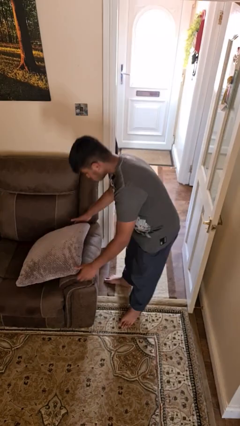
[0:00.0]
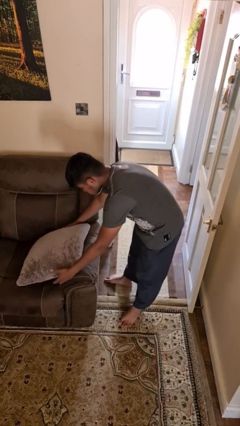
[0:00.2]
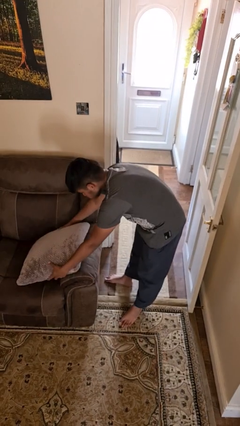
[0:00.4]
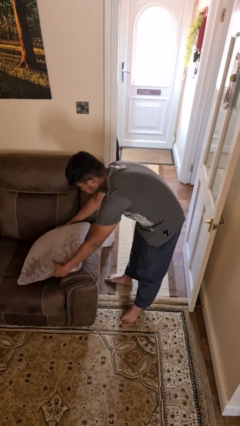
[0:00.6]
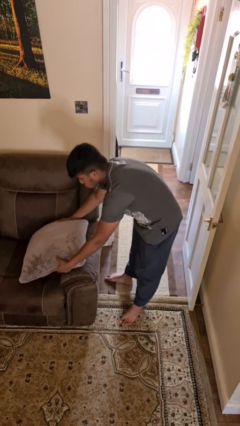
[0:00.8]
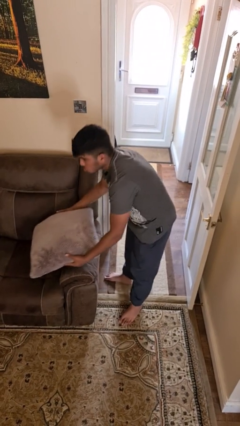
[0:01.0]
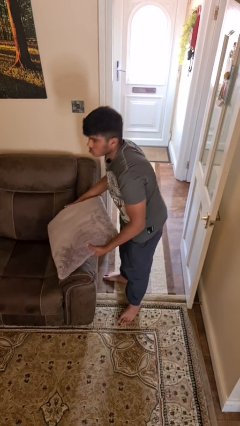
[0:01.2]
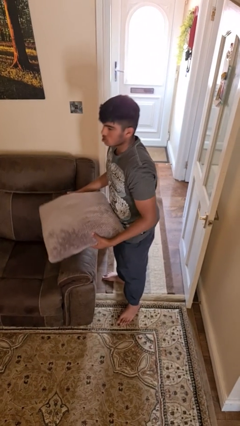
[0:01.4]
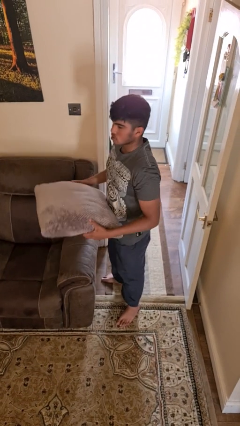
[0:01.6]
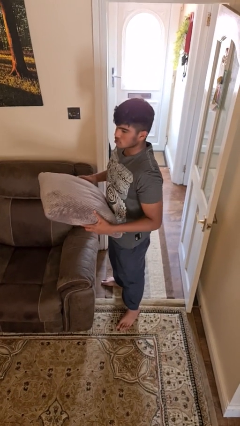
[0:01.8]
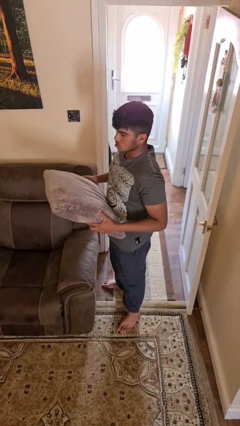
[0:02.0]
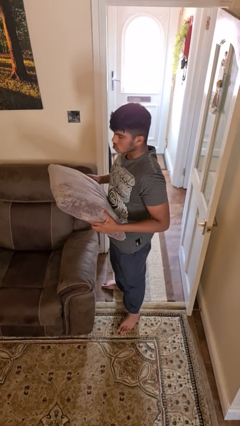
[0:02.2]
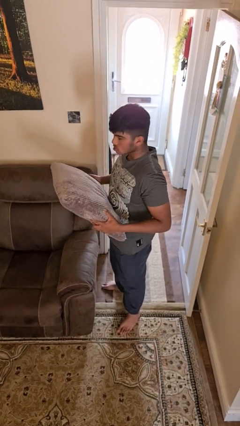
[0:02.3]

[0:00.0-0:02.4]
person picks up object from couch

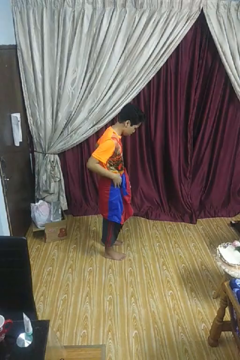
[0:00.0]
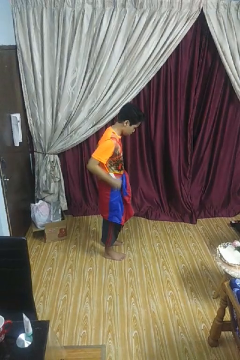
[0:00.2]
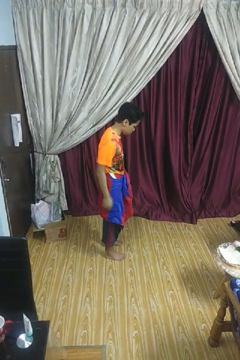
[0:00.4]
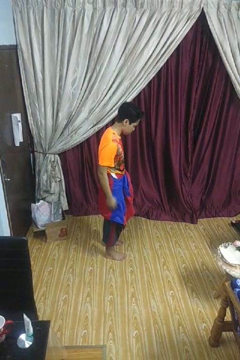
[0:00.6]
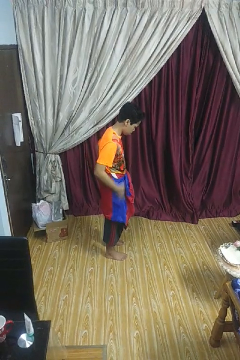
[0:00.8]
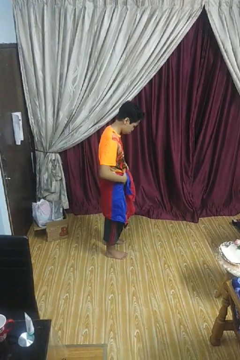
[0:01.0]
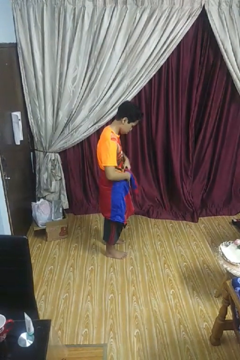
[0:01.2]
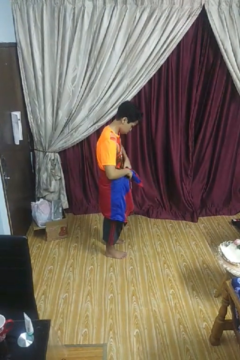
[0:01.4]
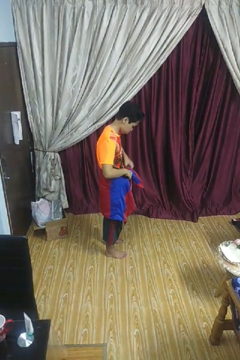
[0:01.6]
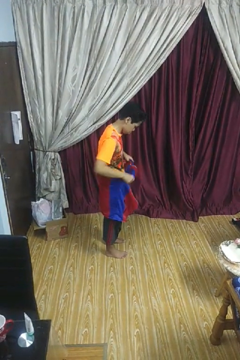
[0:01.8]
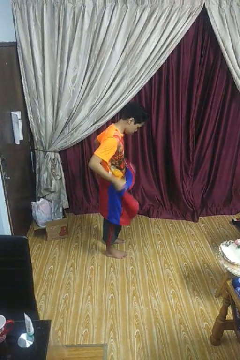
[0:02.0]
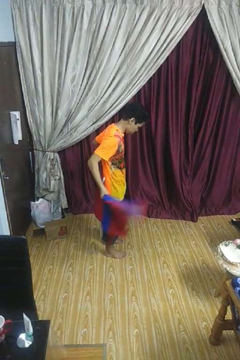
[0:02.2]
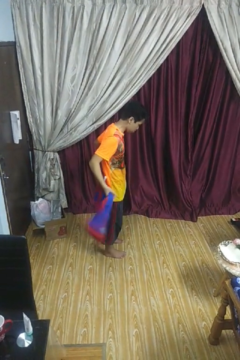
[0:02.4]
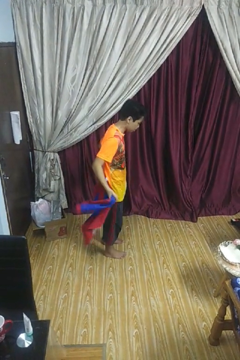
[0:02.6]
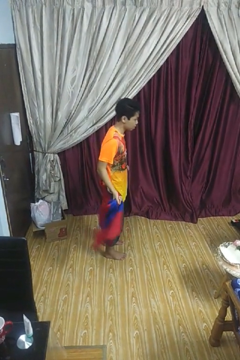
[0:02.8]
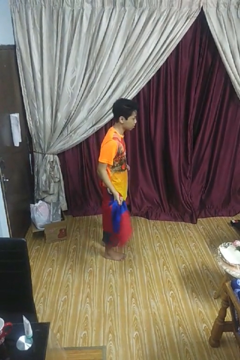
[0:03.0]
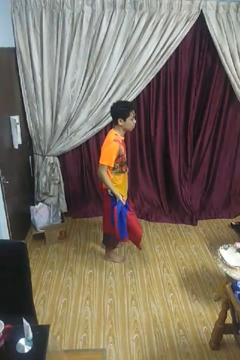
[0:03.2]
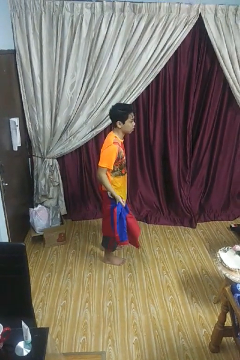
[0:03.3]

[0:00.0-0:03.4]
person unties jacket around waist

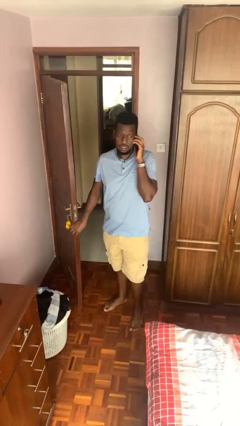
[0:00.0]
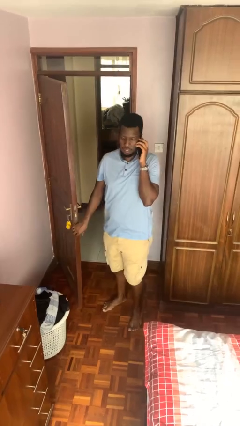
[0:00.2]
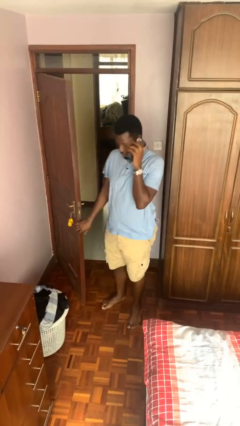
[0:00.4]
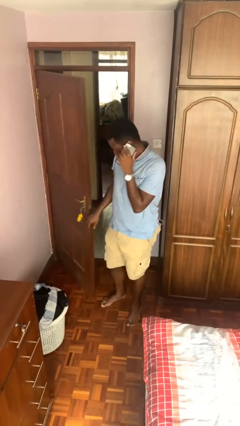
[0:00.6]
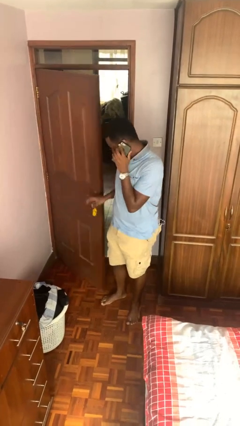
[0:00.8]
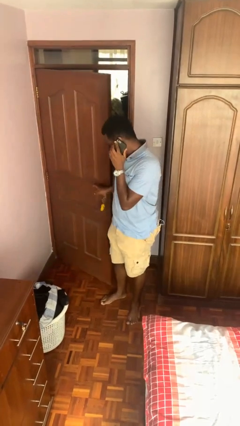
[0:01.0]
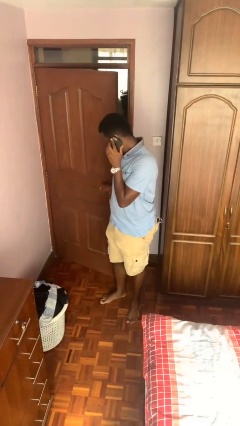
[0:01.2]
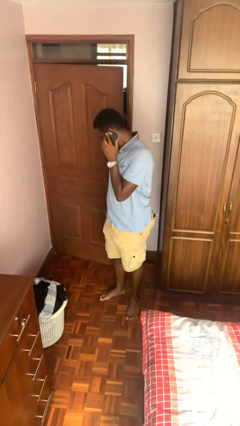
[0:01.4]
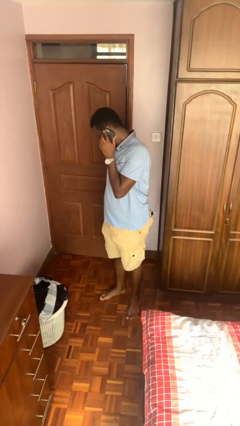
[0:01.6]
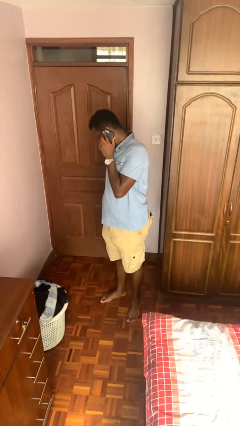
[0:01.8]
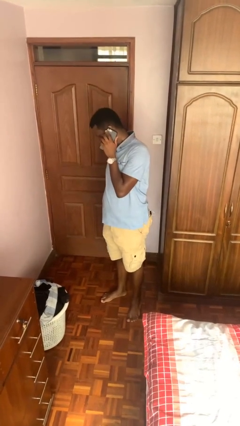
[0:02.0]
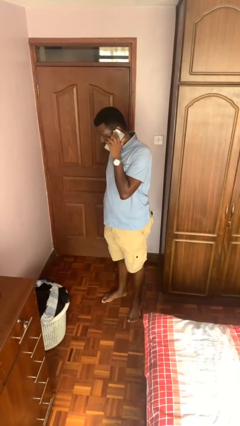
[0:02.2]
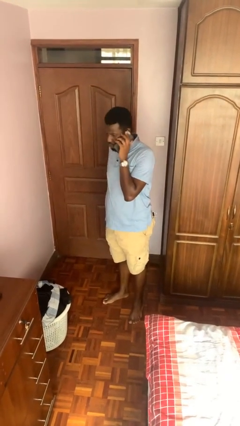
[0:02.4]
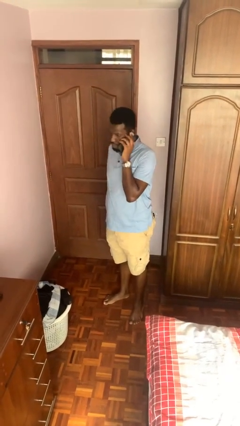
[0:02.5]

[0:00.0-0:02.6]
person closes facility door

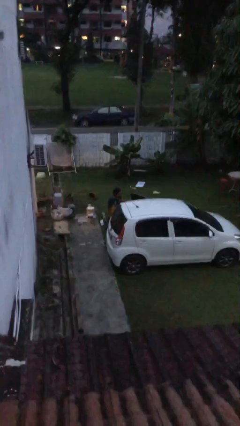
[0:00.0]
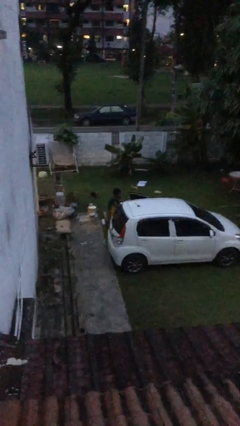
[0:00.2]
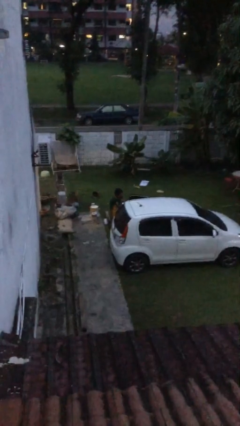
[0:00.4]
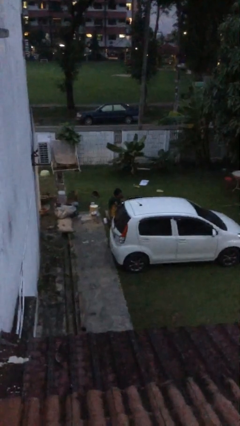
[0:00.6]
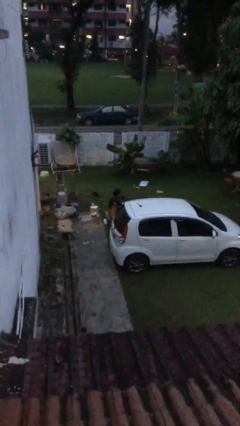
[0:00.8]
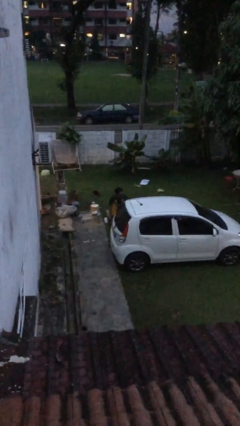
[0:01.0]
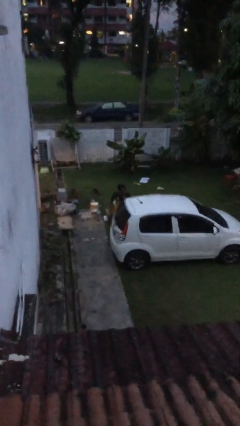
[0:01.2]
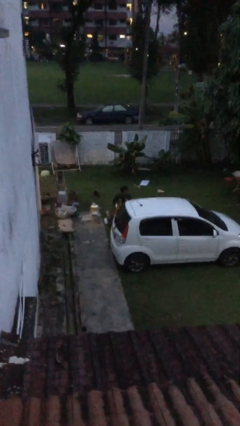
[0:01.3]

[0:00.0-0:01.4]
person closes car door

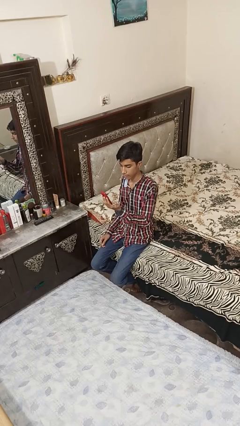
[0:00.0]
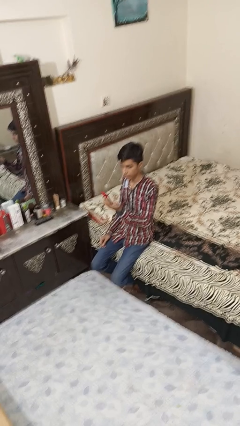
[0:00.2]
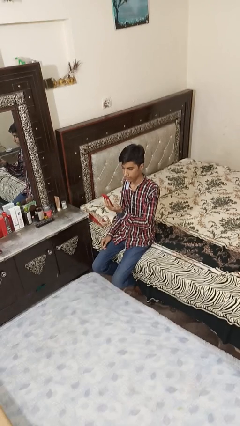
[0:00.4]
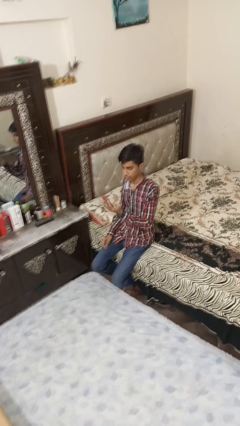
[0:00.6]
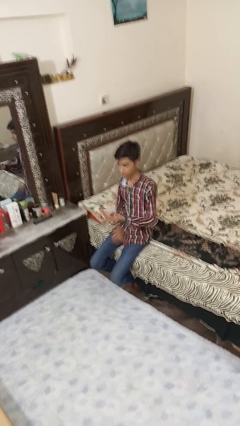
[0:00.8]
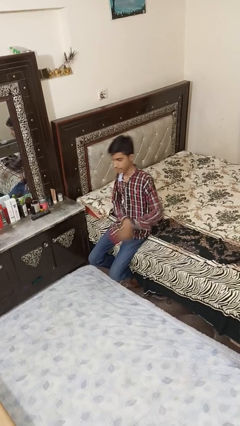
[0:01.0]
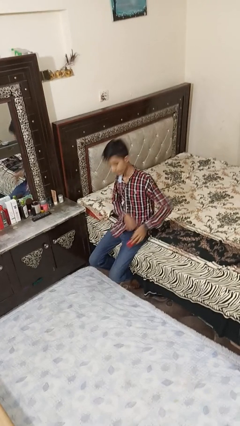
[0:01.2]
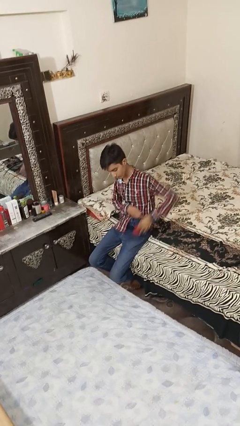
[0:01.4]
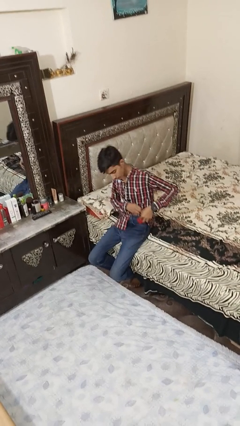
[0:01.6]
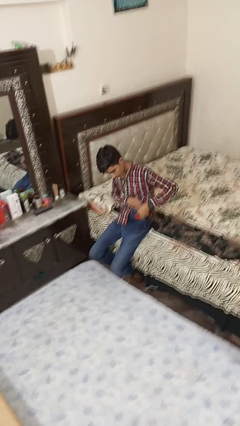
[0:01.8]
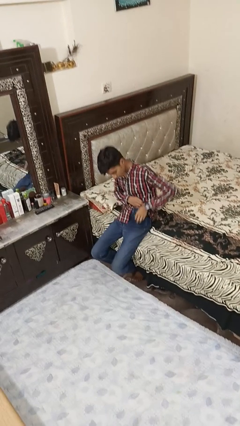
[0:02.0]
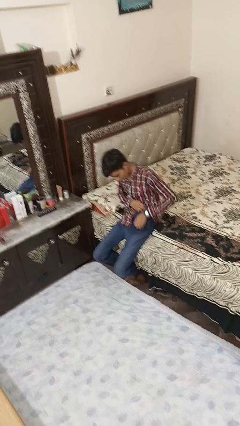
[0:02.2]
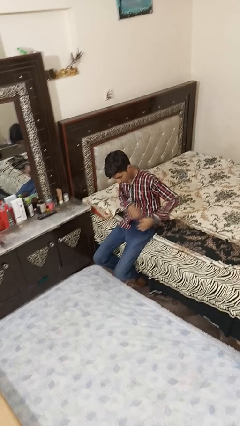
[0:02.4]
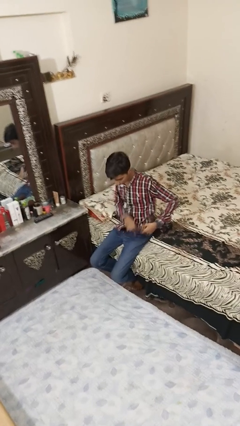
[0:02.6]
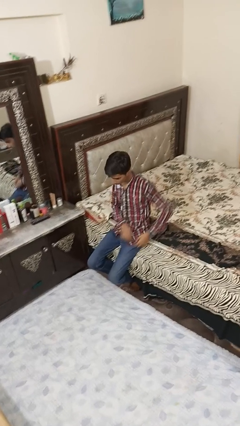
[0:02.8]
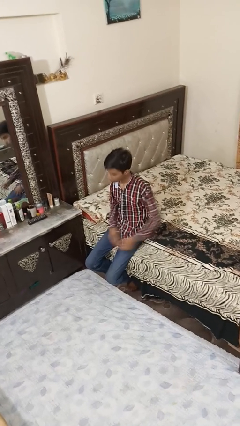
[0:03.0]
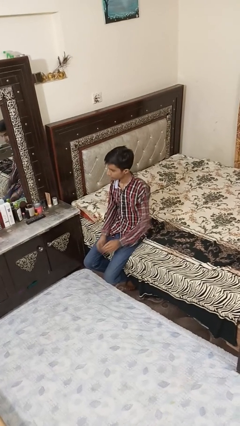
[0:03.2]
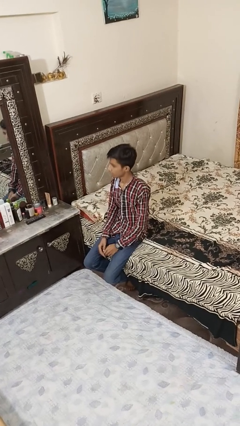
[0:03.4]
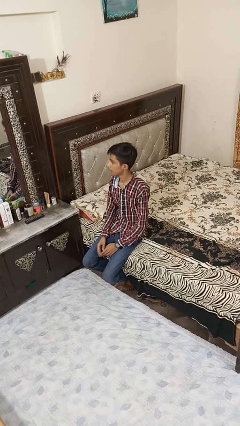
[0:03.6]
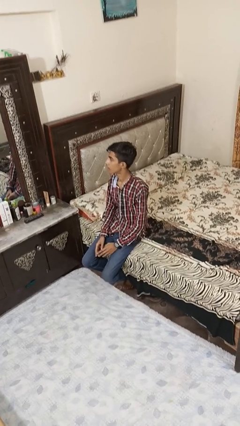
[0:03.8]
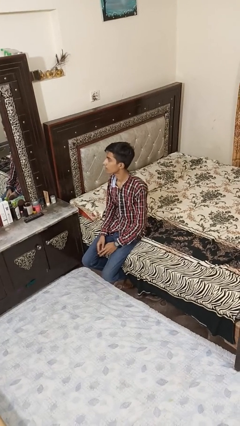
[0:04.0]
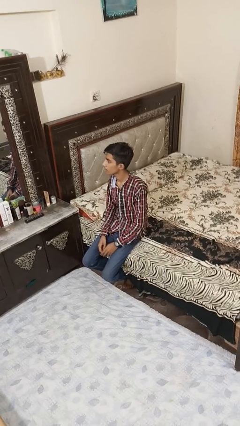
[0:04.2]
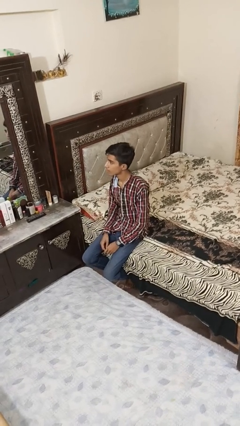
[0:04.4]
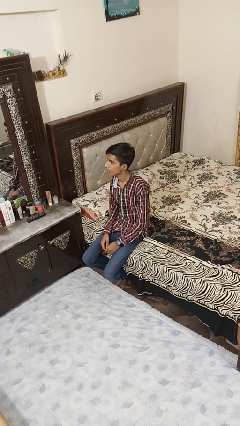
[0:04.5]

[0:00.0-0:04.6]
person puts phone into pocket

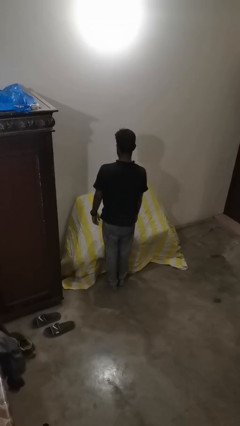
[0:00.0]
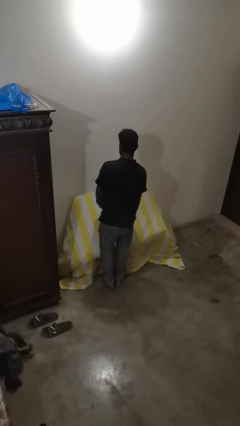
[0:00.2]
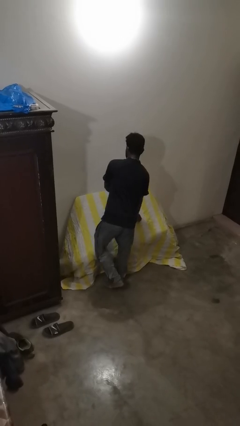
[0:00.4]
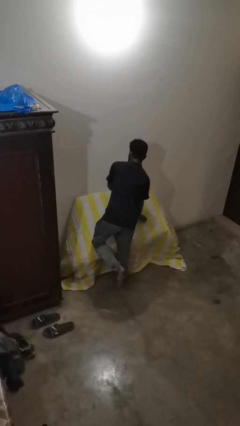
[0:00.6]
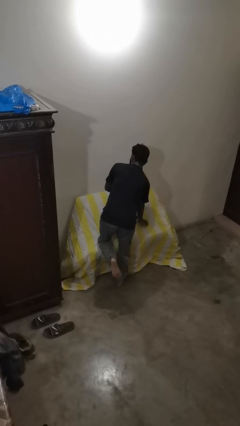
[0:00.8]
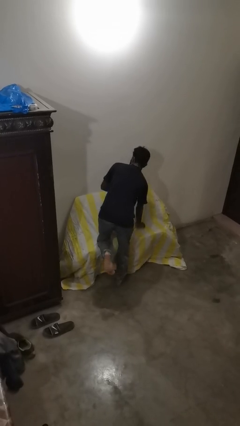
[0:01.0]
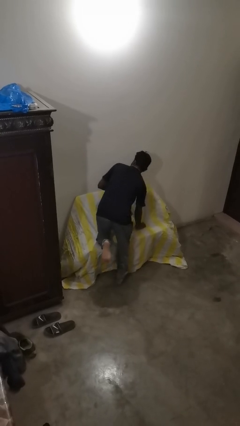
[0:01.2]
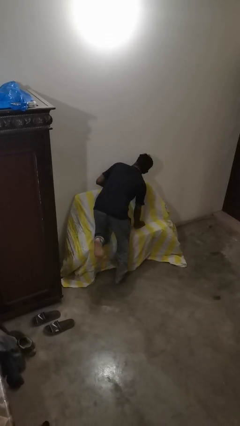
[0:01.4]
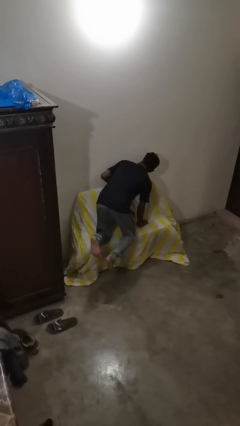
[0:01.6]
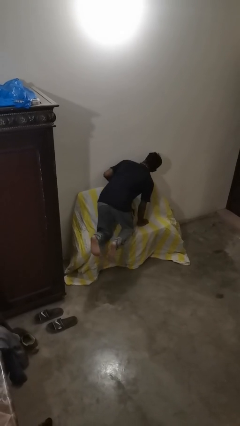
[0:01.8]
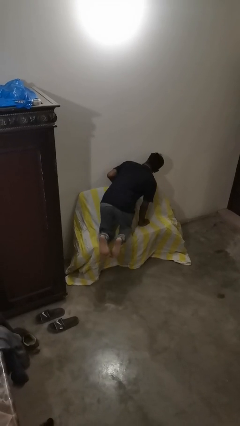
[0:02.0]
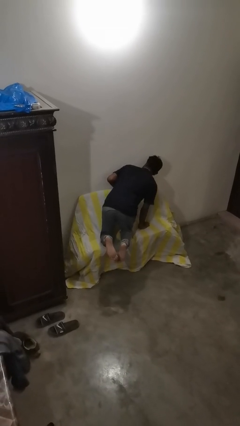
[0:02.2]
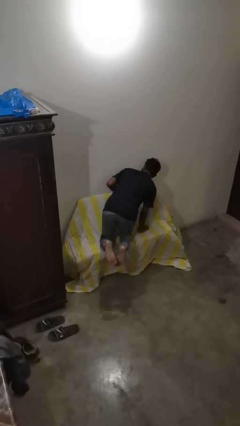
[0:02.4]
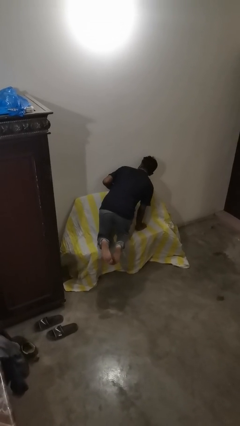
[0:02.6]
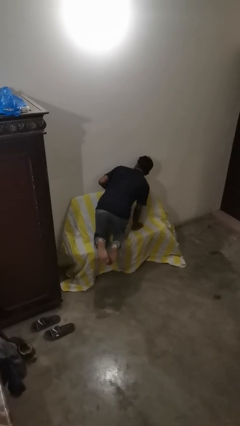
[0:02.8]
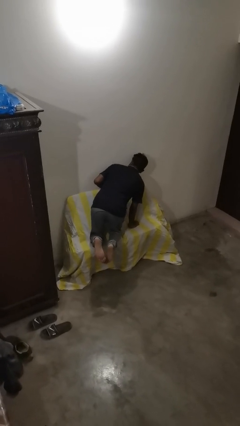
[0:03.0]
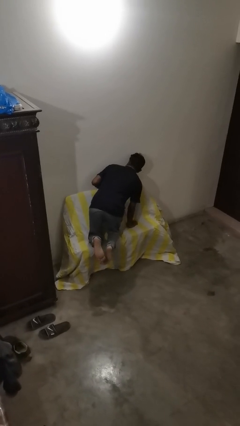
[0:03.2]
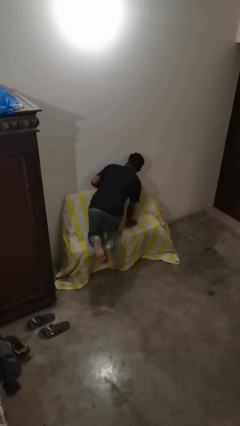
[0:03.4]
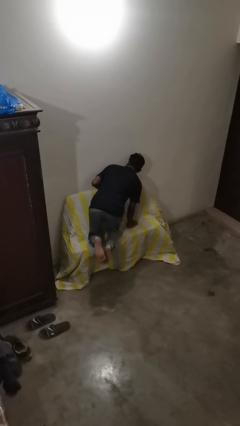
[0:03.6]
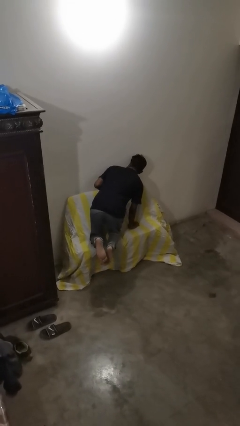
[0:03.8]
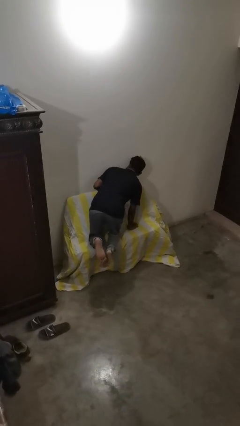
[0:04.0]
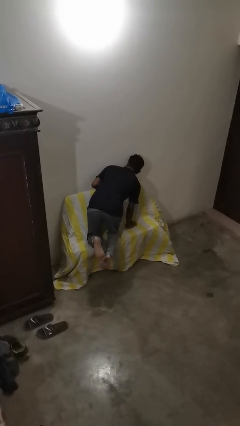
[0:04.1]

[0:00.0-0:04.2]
person lies down on couch
